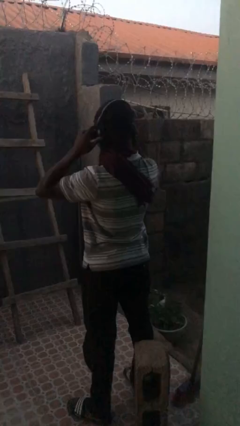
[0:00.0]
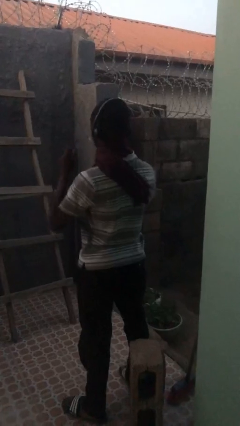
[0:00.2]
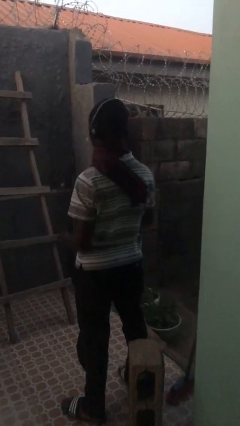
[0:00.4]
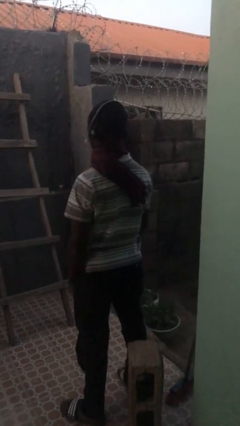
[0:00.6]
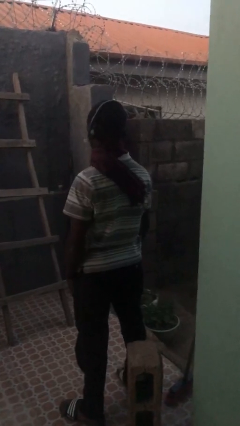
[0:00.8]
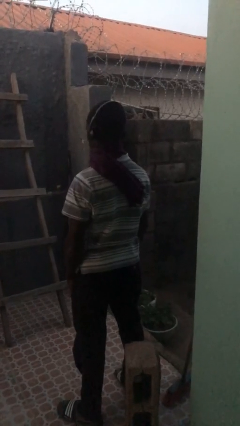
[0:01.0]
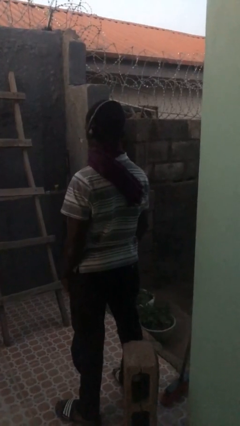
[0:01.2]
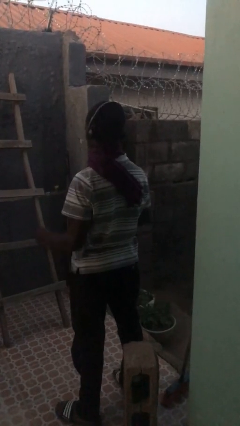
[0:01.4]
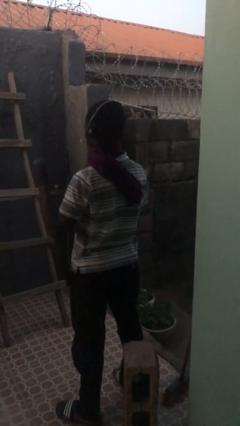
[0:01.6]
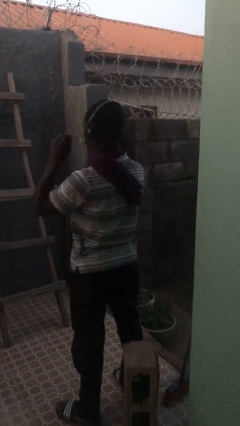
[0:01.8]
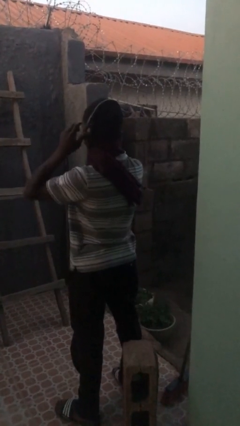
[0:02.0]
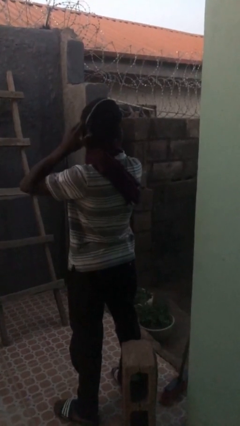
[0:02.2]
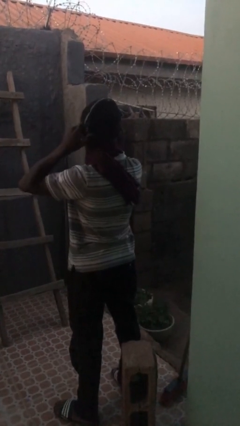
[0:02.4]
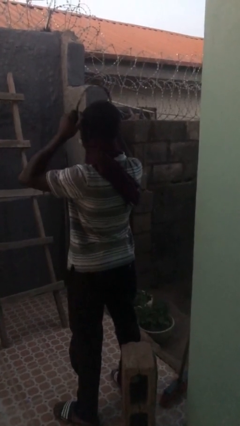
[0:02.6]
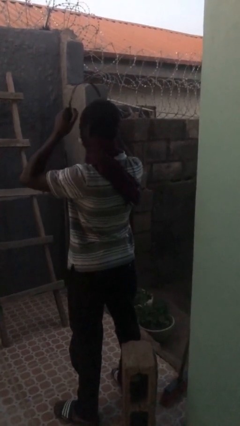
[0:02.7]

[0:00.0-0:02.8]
person puts on headphones

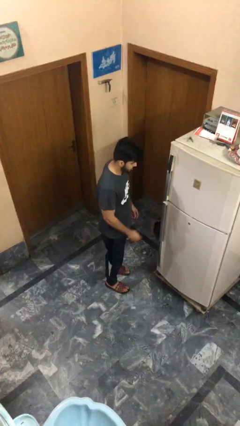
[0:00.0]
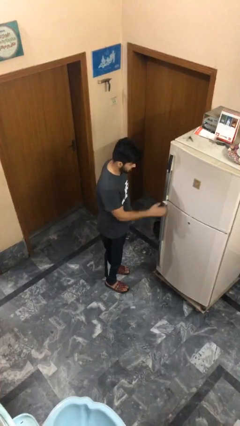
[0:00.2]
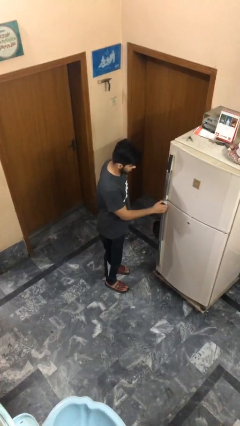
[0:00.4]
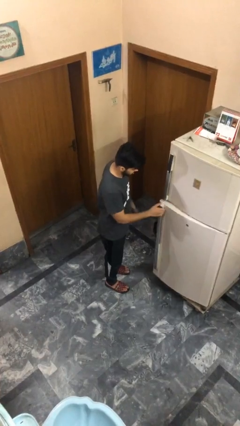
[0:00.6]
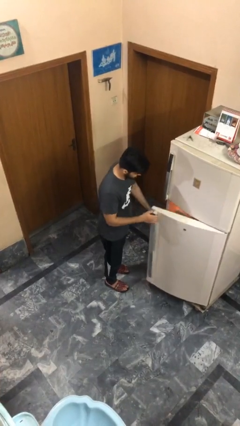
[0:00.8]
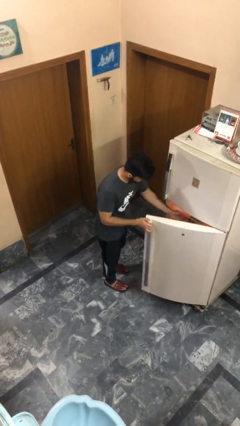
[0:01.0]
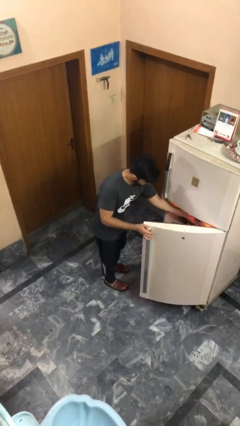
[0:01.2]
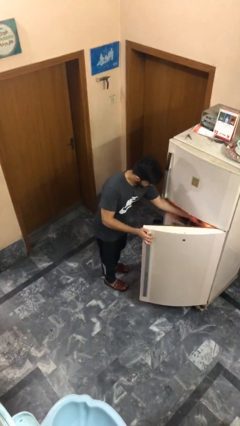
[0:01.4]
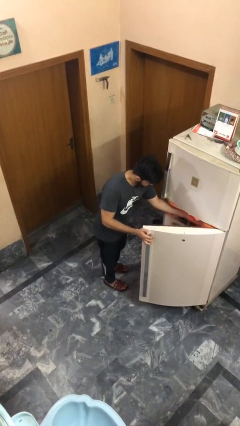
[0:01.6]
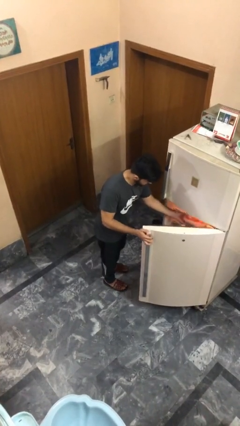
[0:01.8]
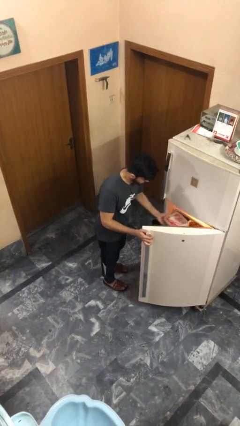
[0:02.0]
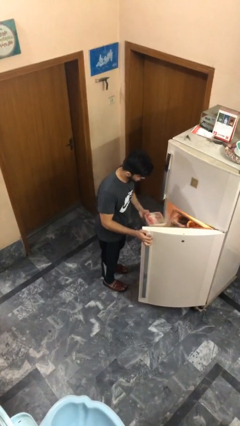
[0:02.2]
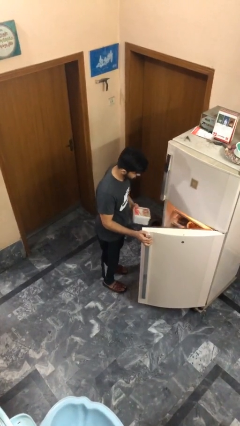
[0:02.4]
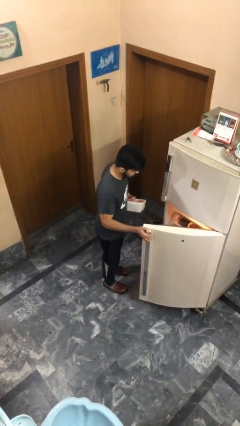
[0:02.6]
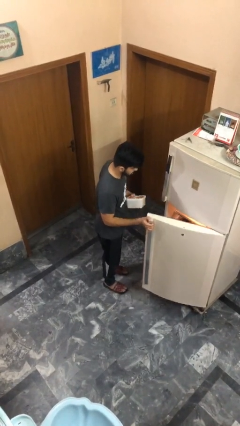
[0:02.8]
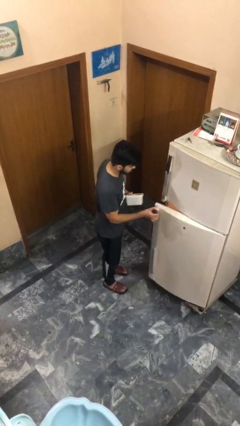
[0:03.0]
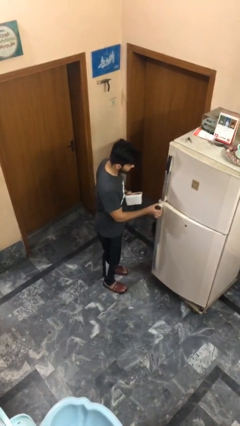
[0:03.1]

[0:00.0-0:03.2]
person takes object from refrigerator

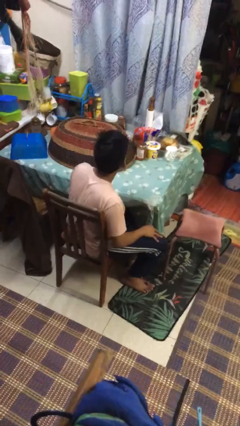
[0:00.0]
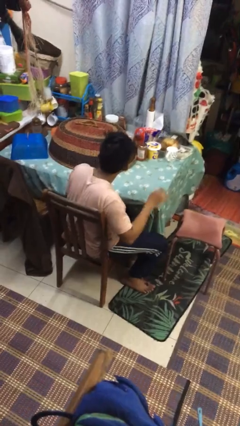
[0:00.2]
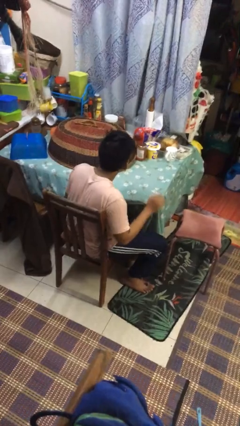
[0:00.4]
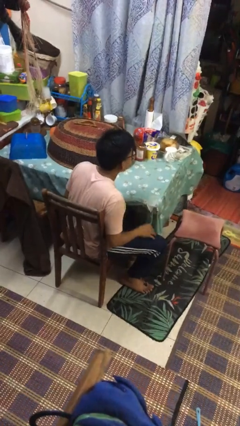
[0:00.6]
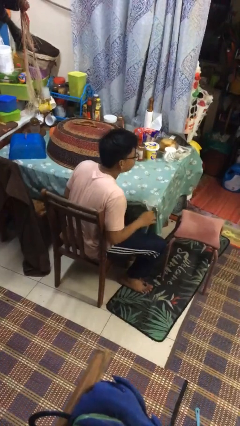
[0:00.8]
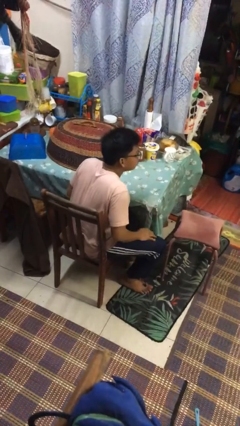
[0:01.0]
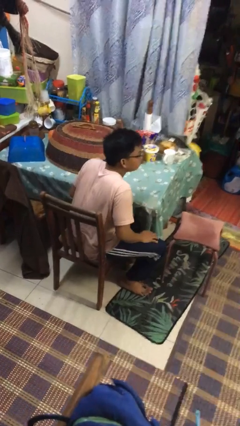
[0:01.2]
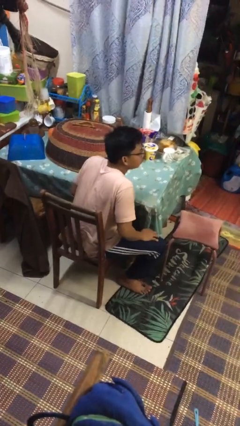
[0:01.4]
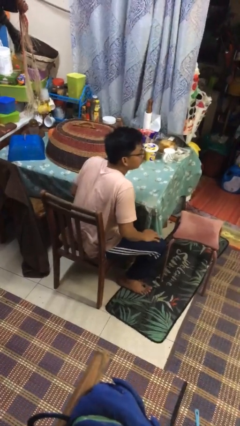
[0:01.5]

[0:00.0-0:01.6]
person slaps hands on thighs

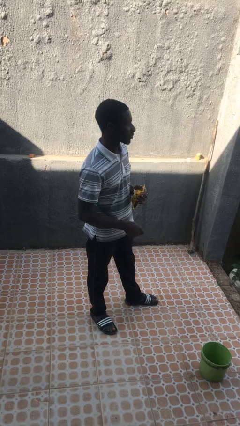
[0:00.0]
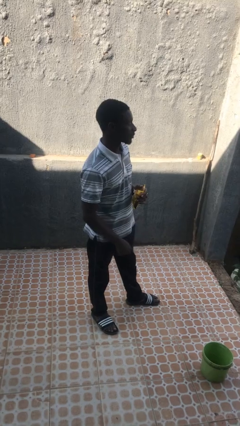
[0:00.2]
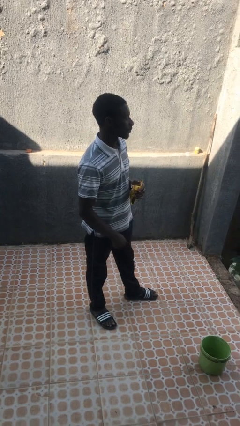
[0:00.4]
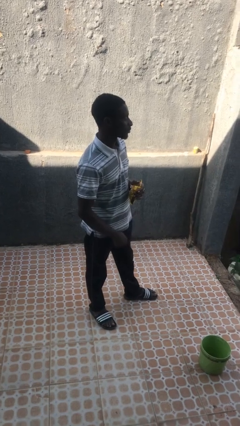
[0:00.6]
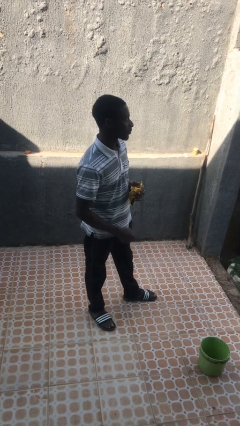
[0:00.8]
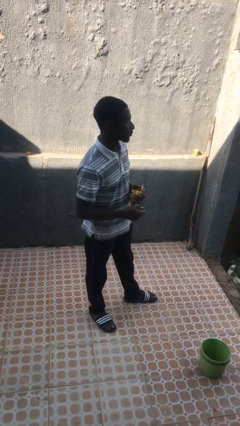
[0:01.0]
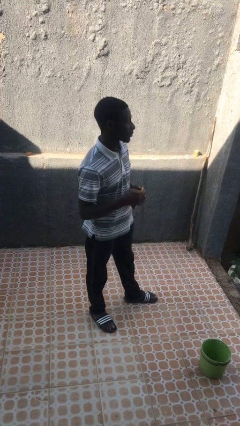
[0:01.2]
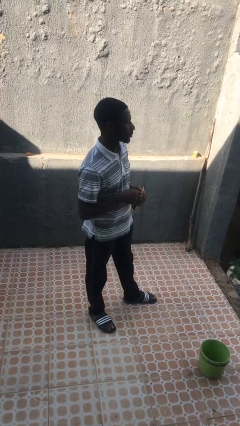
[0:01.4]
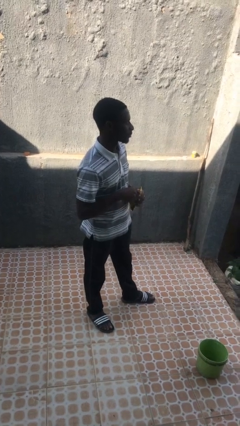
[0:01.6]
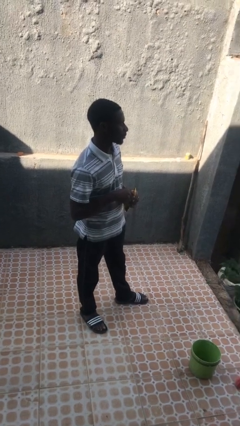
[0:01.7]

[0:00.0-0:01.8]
person eats snack from bag

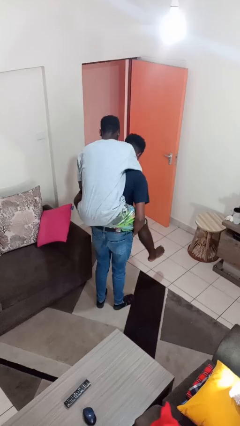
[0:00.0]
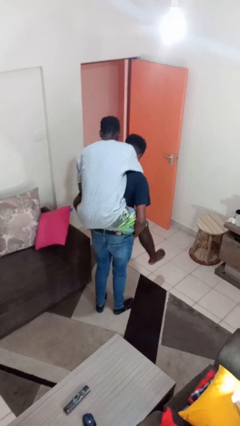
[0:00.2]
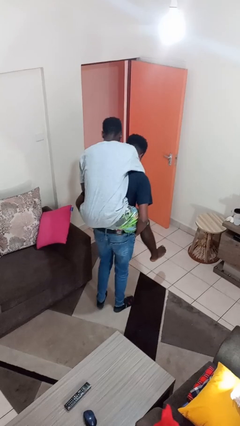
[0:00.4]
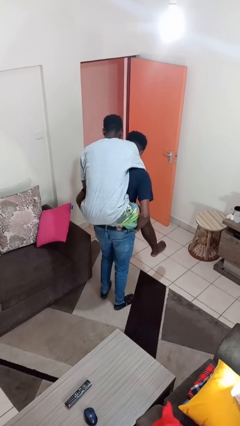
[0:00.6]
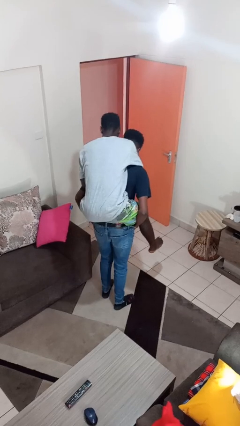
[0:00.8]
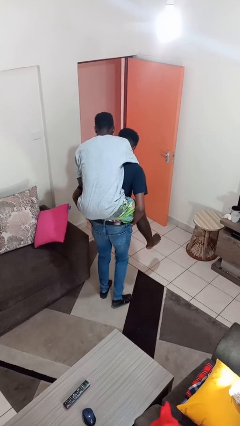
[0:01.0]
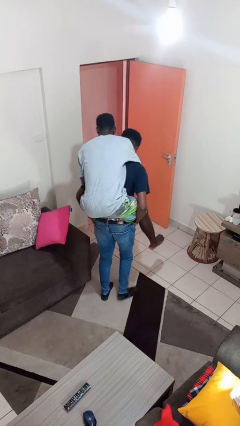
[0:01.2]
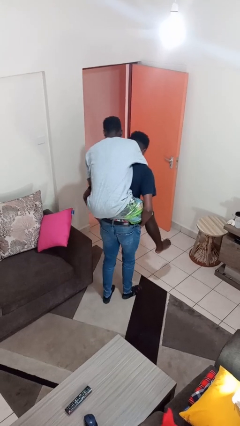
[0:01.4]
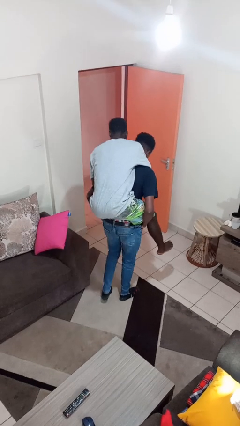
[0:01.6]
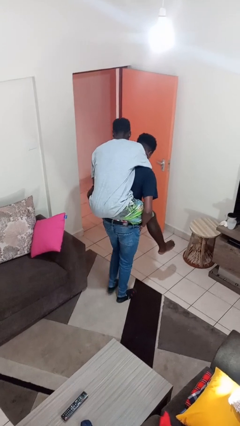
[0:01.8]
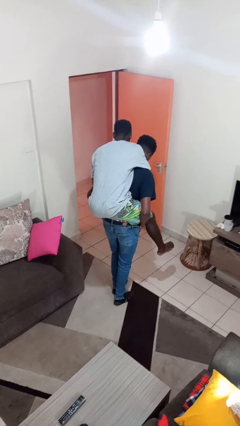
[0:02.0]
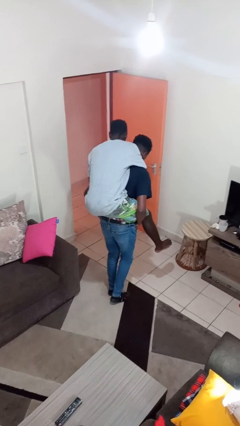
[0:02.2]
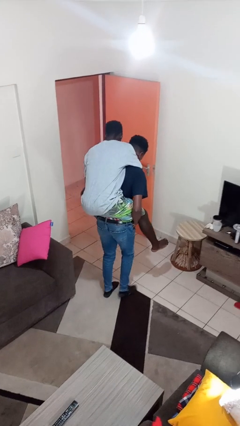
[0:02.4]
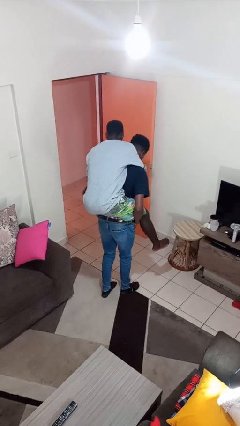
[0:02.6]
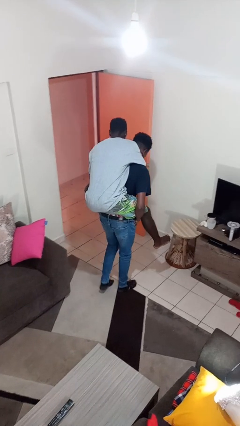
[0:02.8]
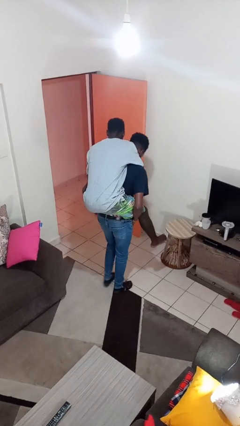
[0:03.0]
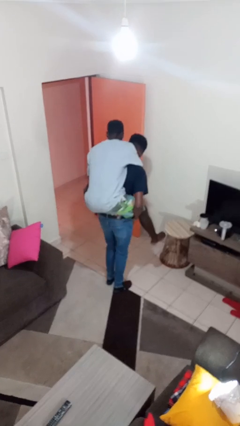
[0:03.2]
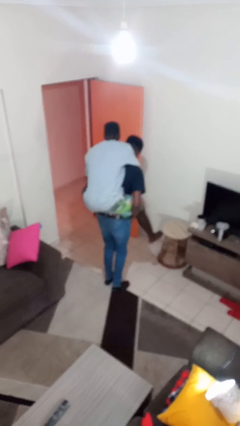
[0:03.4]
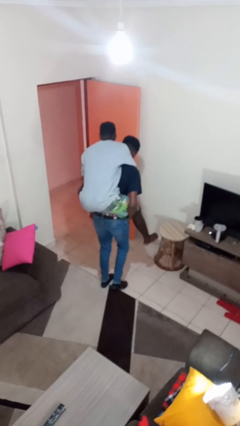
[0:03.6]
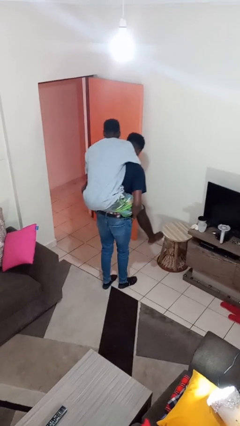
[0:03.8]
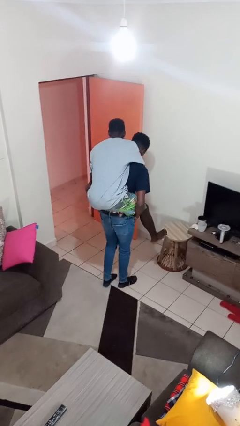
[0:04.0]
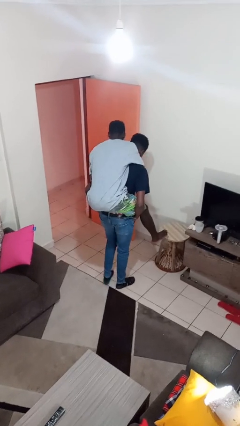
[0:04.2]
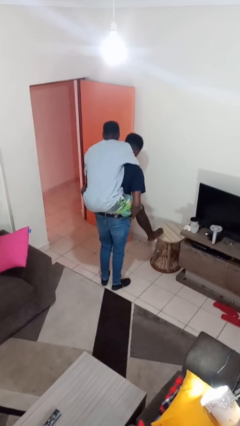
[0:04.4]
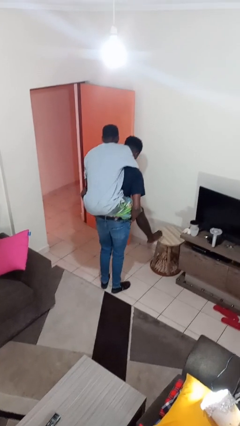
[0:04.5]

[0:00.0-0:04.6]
person carries person on back

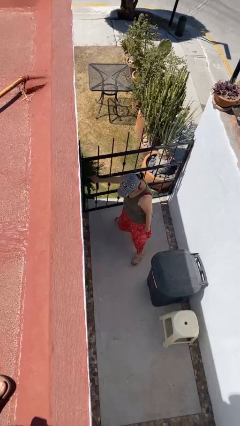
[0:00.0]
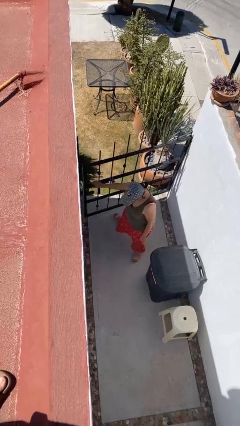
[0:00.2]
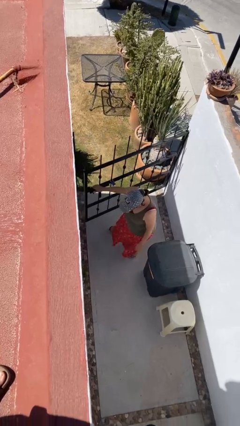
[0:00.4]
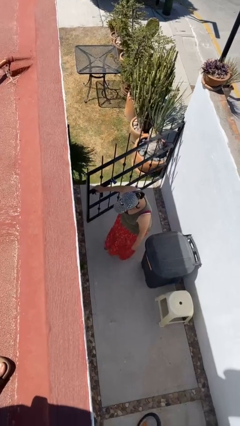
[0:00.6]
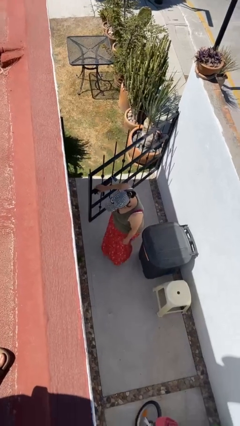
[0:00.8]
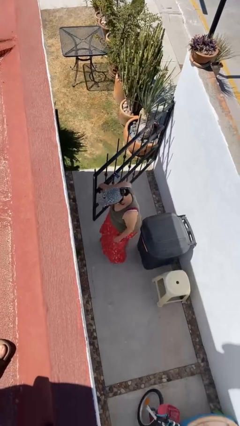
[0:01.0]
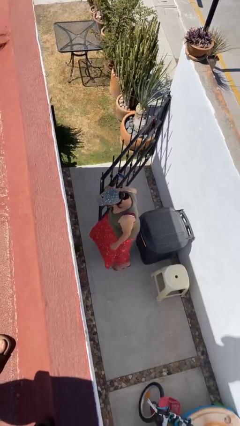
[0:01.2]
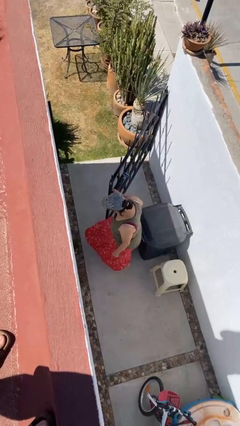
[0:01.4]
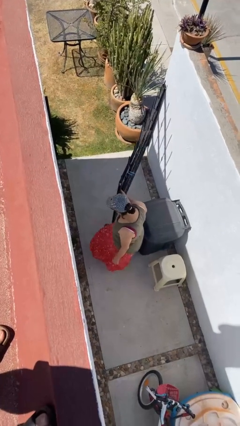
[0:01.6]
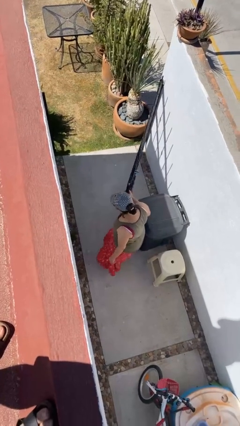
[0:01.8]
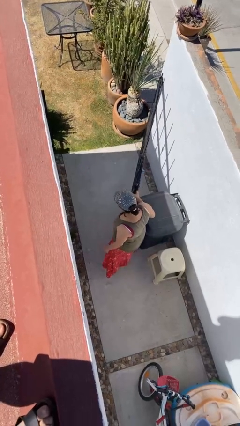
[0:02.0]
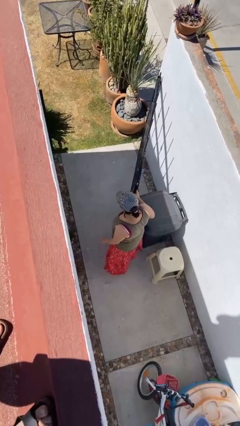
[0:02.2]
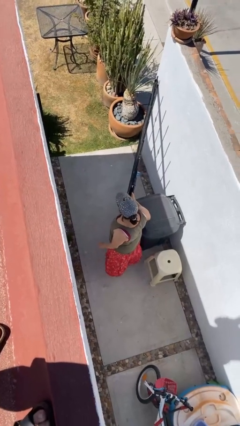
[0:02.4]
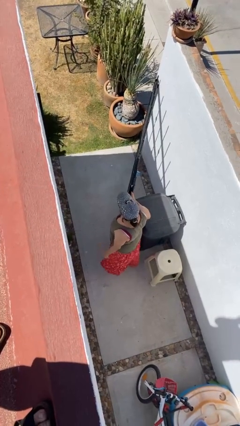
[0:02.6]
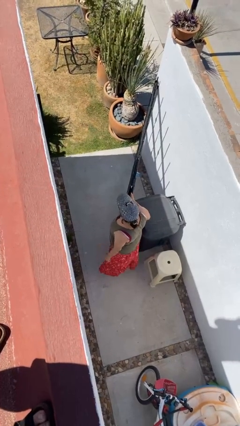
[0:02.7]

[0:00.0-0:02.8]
person opens facility door

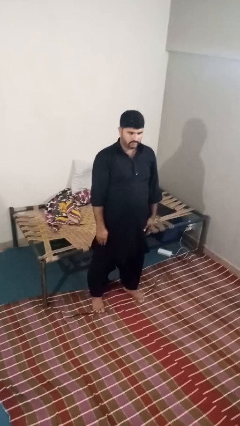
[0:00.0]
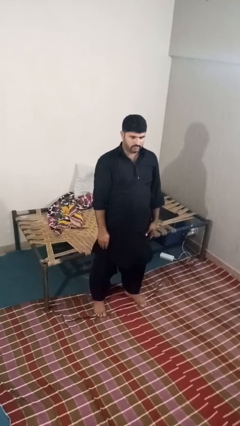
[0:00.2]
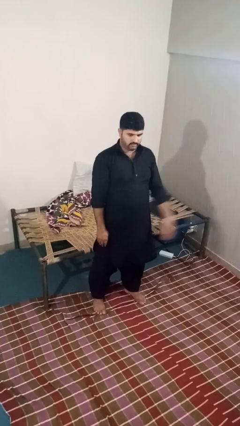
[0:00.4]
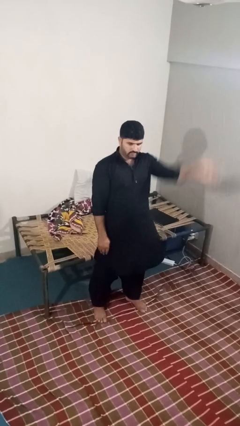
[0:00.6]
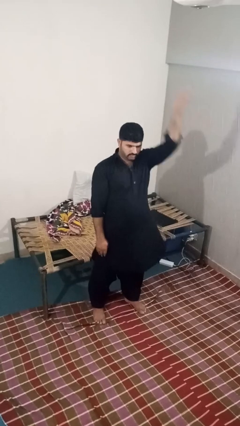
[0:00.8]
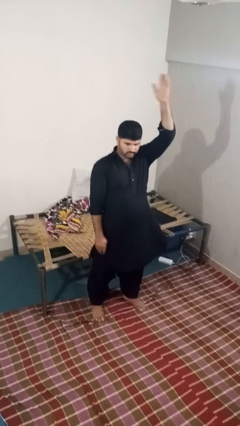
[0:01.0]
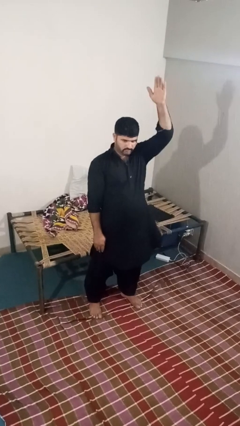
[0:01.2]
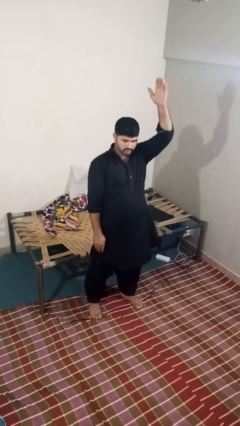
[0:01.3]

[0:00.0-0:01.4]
person gestures swipe up
